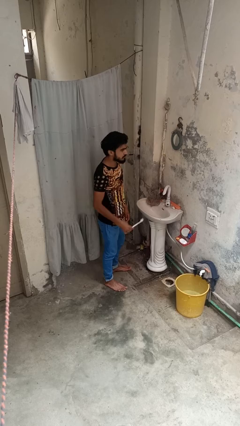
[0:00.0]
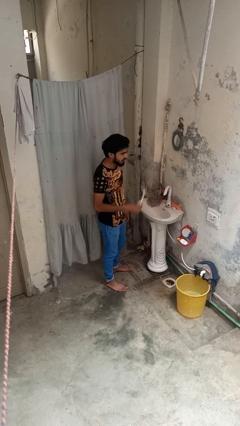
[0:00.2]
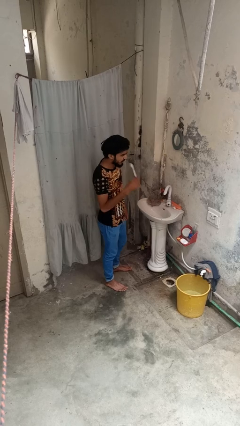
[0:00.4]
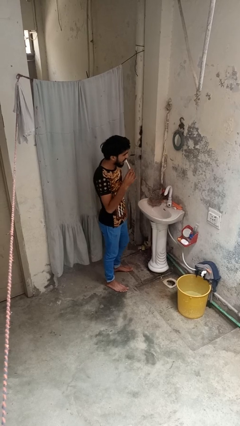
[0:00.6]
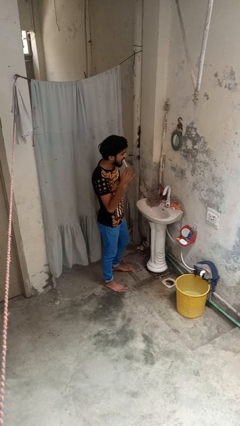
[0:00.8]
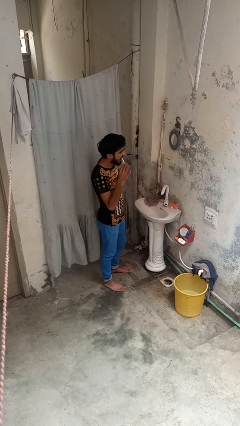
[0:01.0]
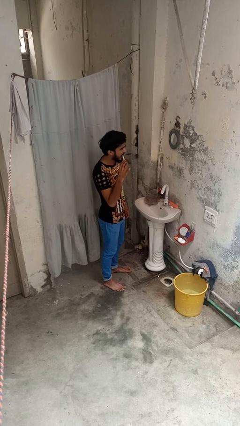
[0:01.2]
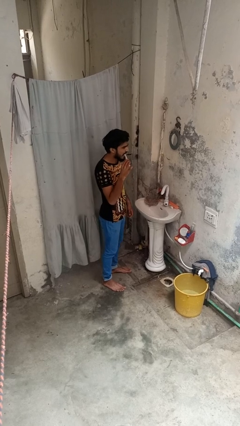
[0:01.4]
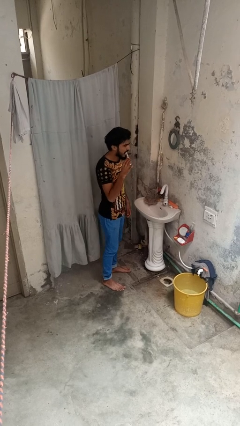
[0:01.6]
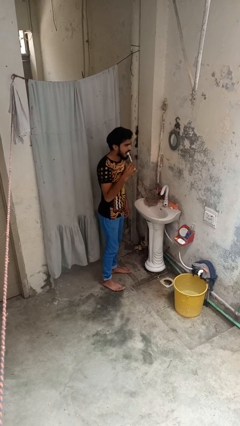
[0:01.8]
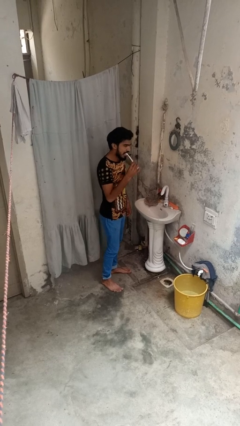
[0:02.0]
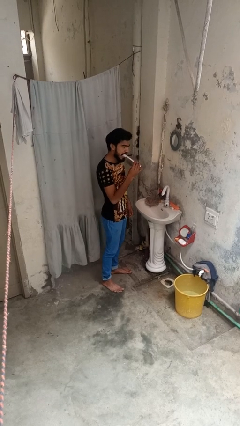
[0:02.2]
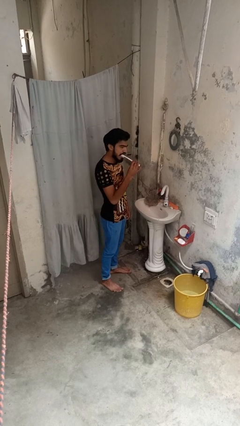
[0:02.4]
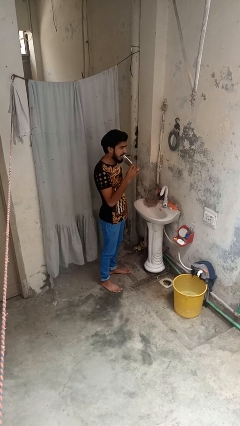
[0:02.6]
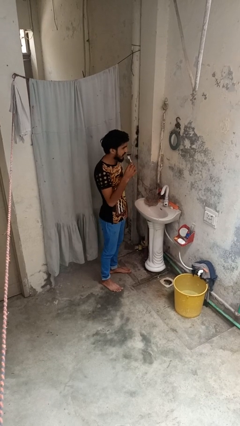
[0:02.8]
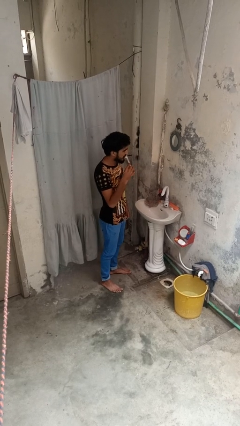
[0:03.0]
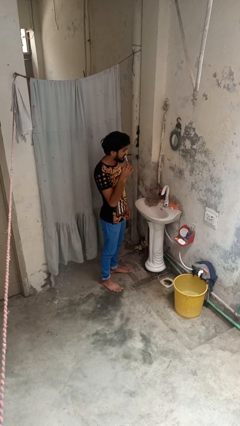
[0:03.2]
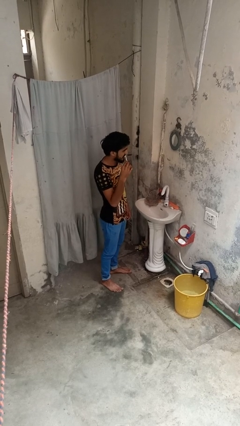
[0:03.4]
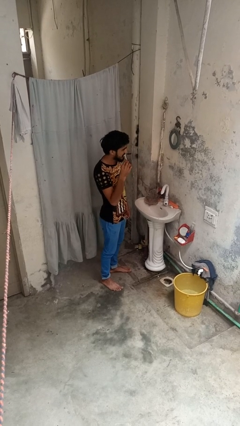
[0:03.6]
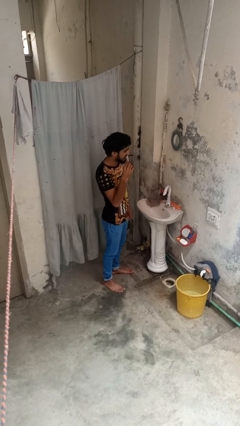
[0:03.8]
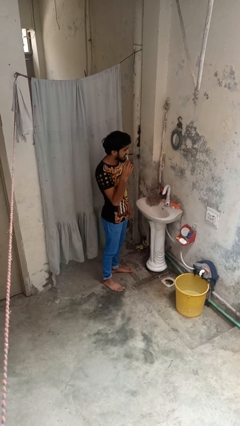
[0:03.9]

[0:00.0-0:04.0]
person brushes teeth

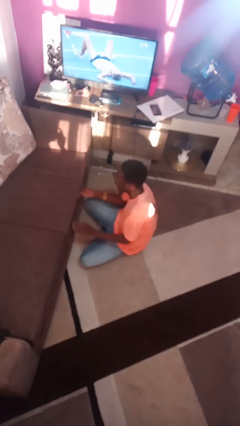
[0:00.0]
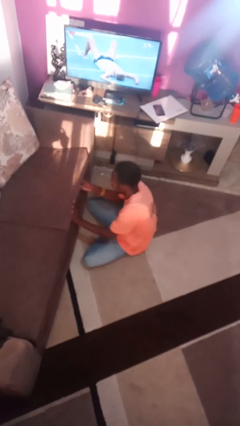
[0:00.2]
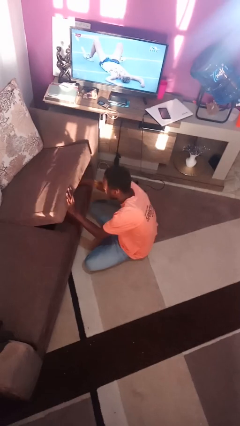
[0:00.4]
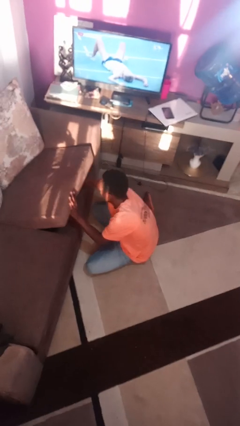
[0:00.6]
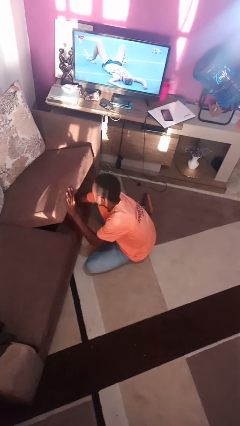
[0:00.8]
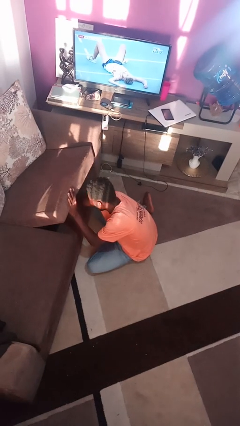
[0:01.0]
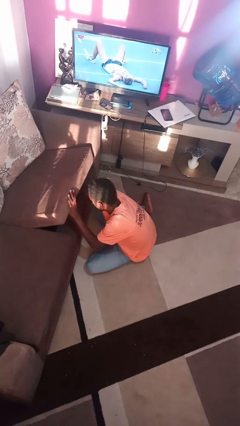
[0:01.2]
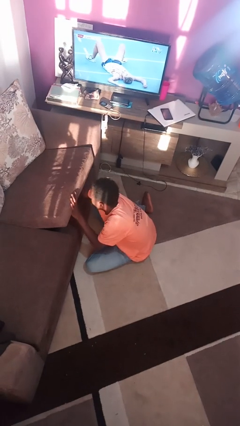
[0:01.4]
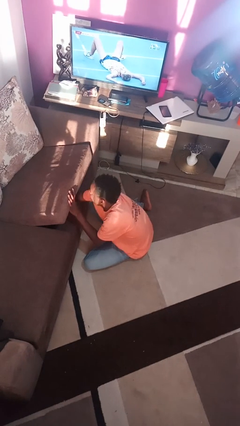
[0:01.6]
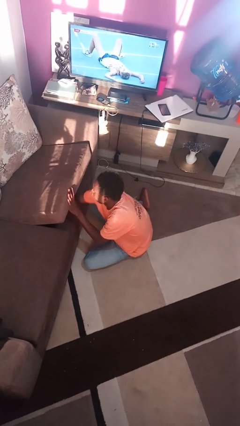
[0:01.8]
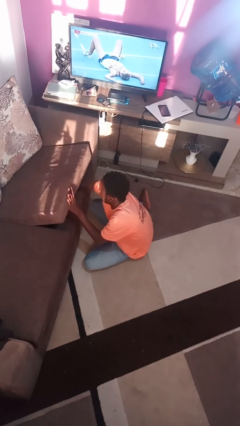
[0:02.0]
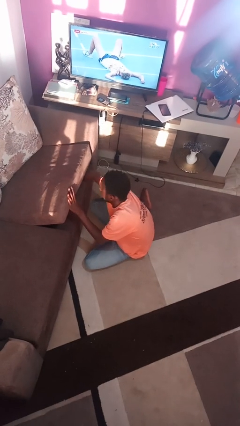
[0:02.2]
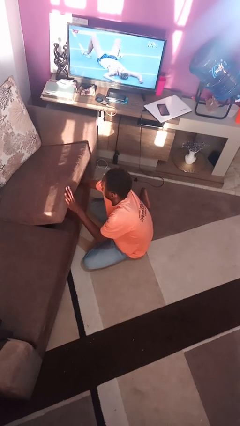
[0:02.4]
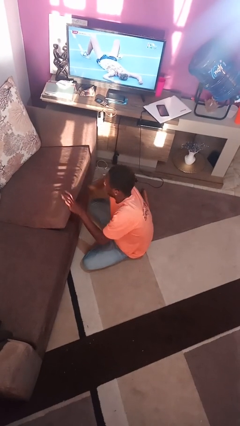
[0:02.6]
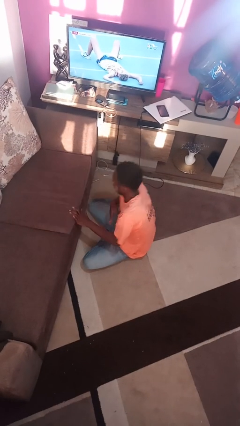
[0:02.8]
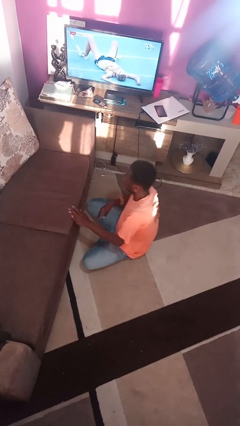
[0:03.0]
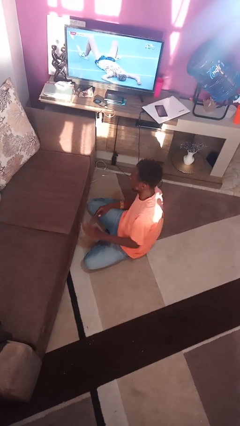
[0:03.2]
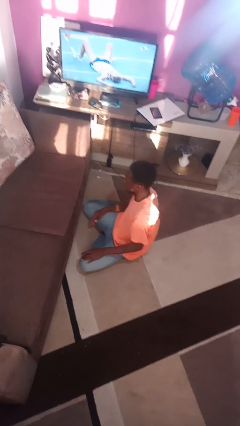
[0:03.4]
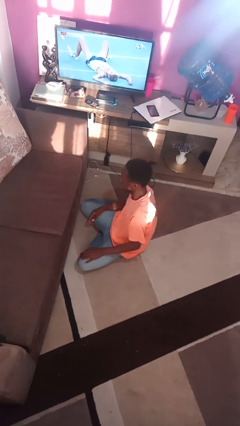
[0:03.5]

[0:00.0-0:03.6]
person searches under couch

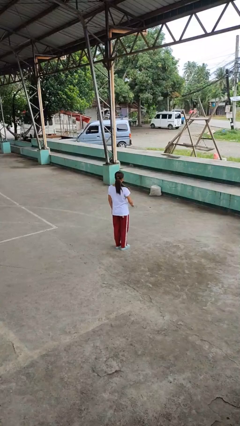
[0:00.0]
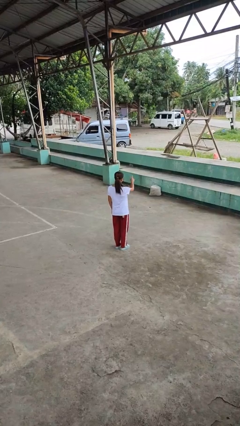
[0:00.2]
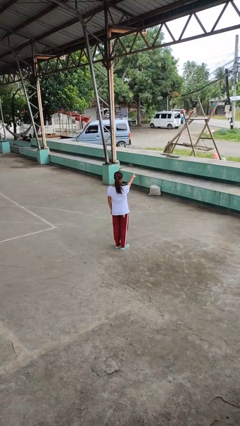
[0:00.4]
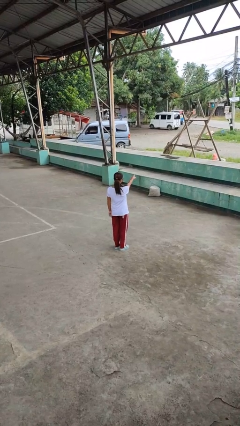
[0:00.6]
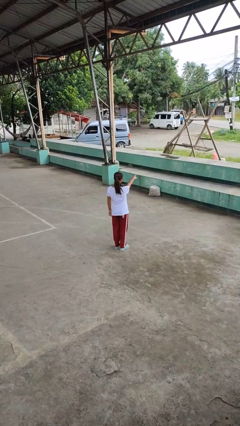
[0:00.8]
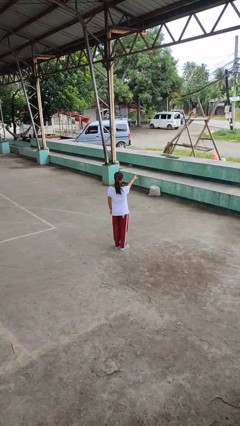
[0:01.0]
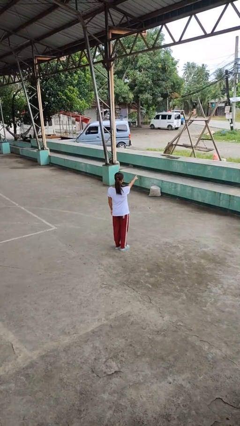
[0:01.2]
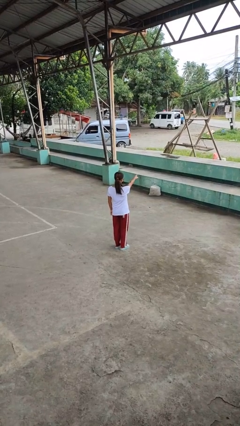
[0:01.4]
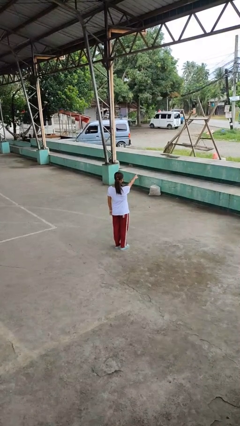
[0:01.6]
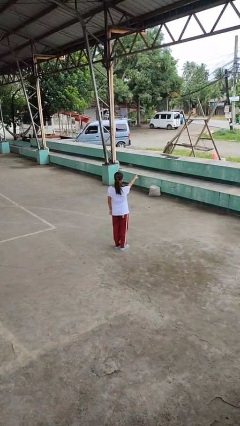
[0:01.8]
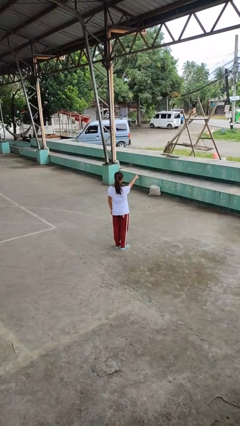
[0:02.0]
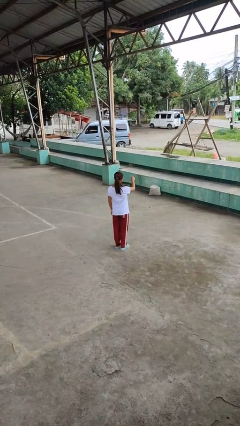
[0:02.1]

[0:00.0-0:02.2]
person points at person

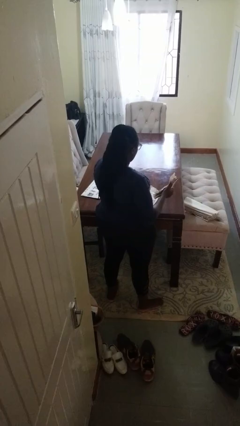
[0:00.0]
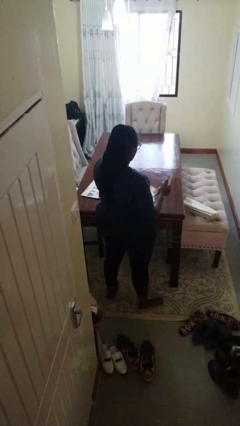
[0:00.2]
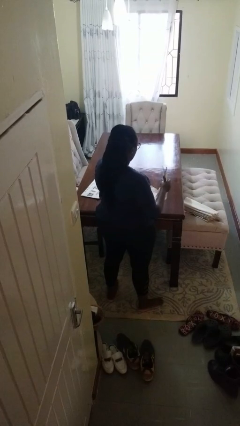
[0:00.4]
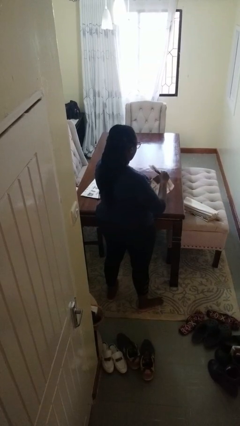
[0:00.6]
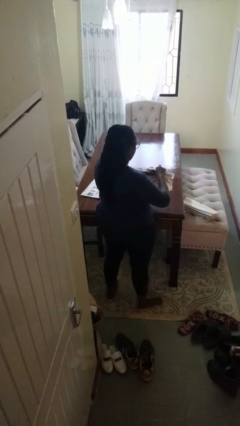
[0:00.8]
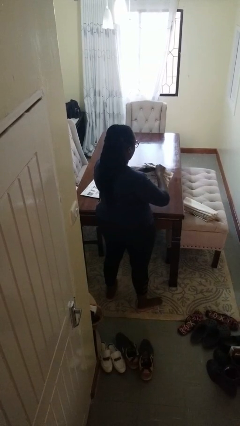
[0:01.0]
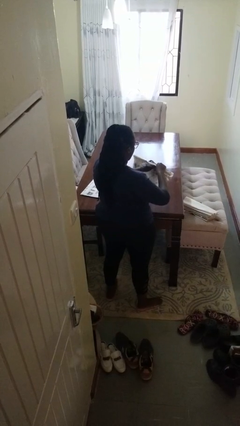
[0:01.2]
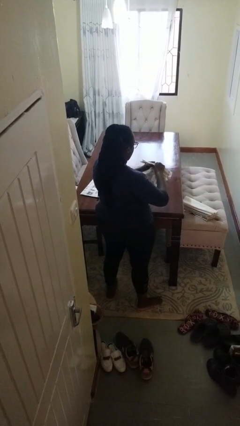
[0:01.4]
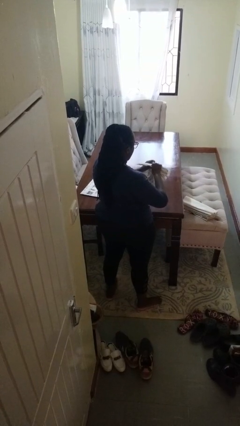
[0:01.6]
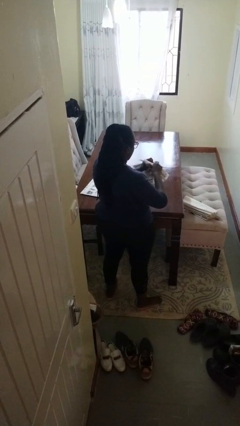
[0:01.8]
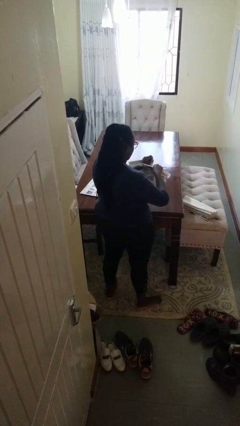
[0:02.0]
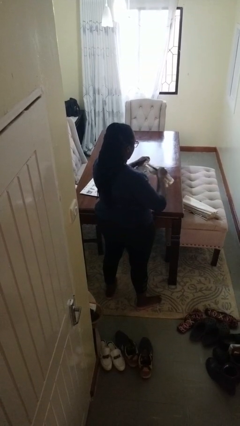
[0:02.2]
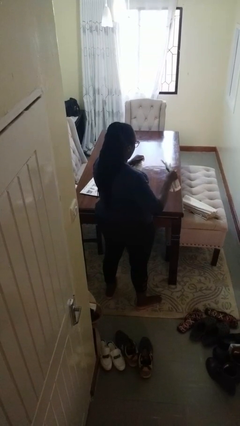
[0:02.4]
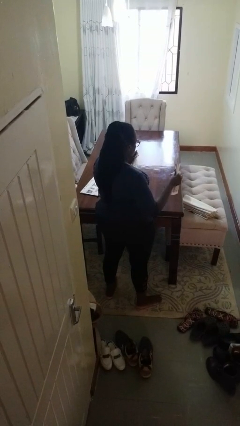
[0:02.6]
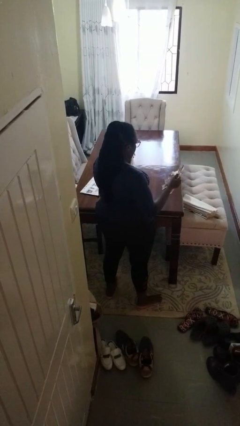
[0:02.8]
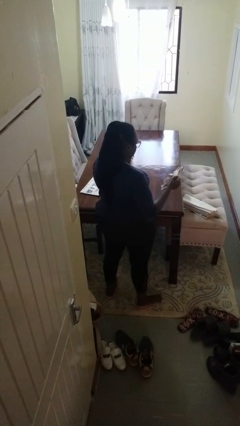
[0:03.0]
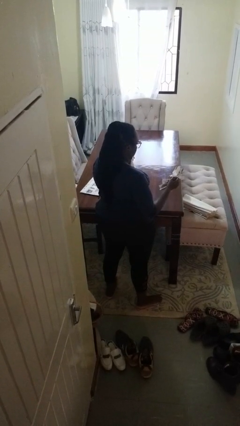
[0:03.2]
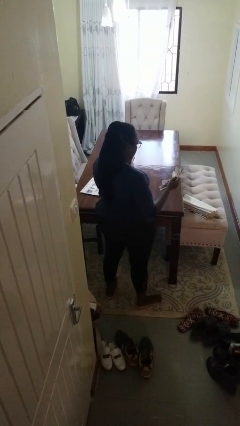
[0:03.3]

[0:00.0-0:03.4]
person tears paper

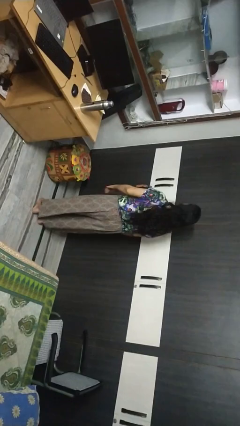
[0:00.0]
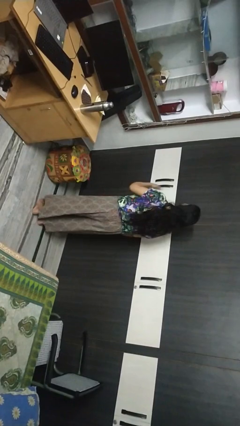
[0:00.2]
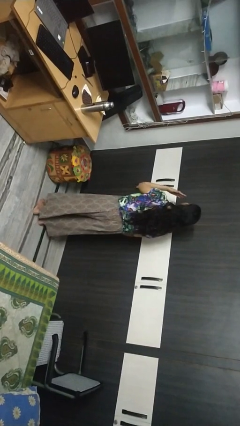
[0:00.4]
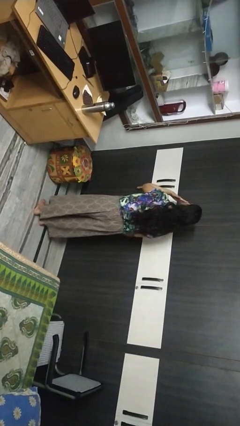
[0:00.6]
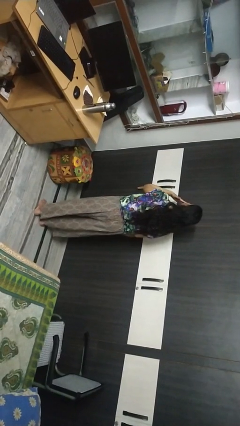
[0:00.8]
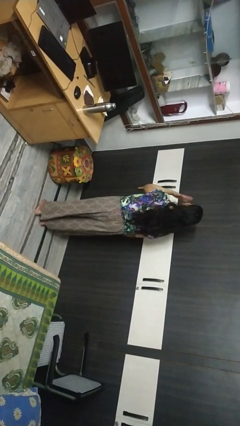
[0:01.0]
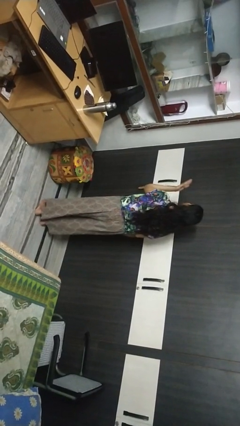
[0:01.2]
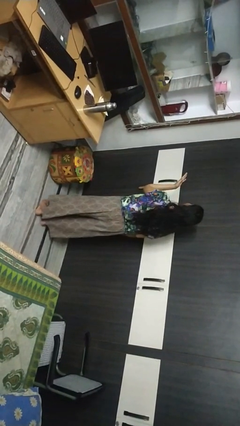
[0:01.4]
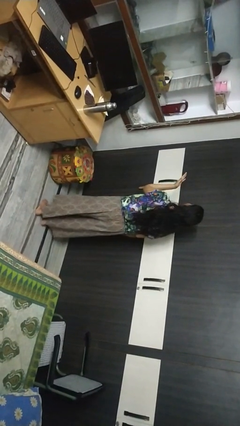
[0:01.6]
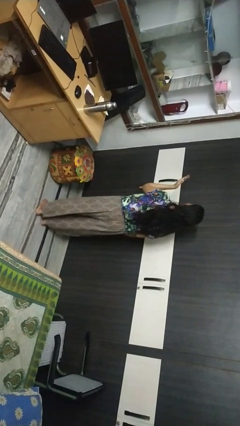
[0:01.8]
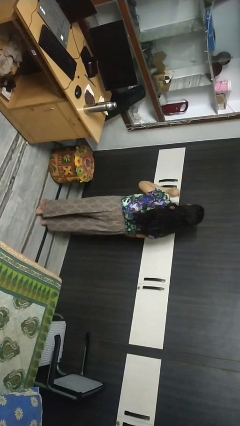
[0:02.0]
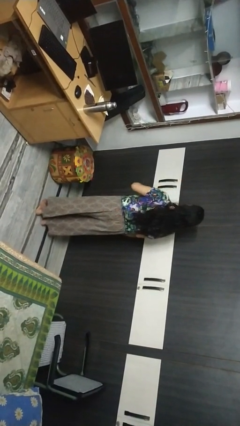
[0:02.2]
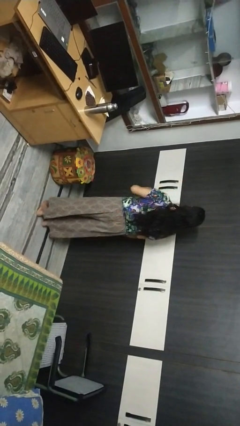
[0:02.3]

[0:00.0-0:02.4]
person gestures blow kiss

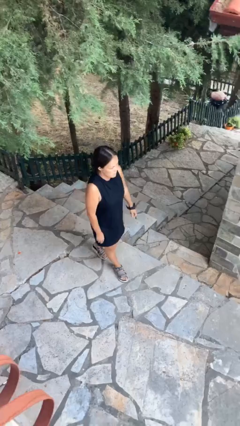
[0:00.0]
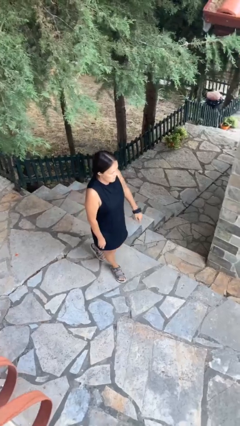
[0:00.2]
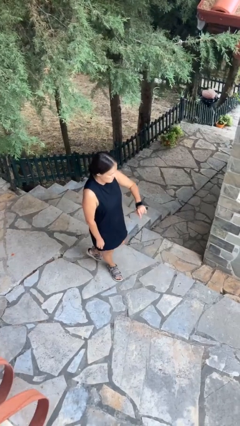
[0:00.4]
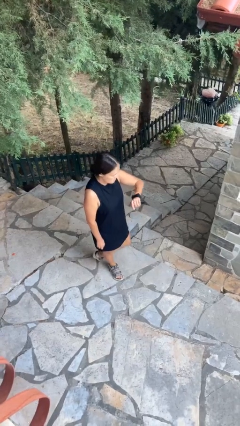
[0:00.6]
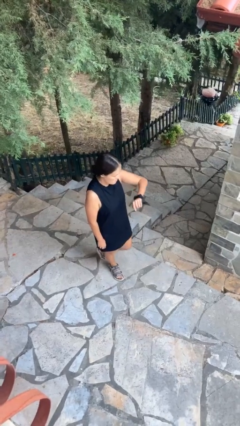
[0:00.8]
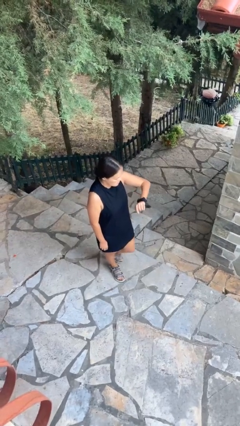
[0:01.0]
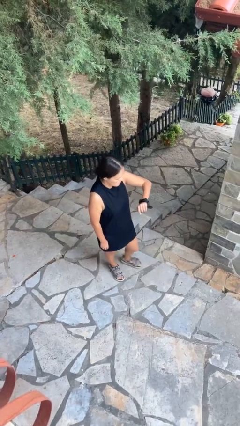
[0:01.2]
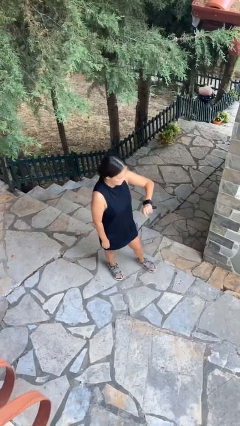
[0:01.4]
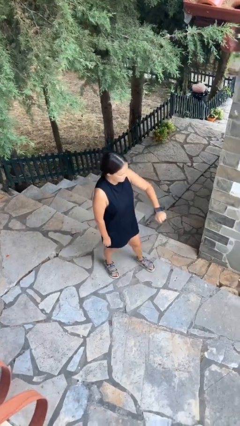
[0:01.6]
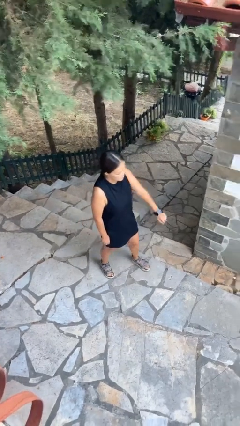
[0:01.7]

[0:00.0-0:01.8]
person looks at wristwatch
